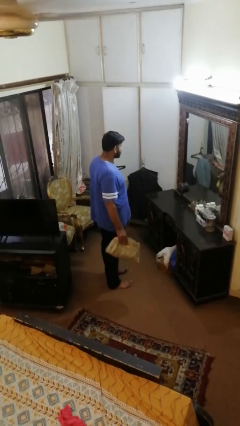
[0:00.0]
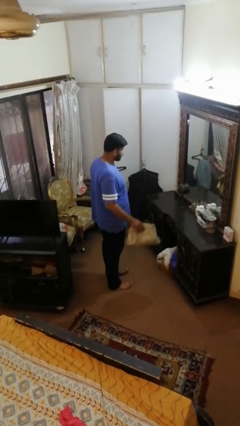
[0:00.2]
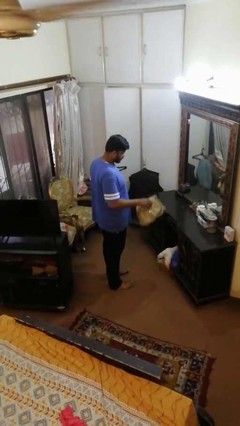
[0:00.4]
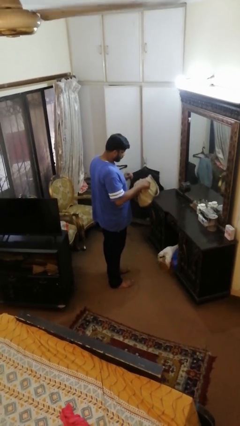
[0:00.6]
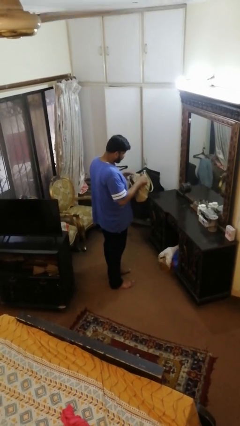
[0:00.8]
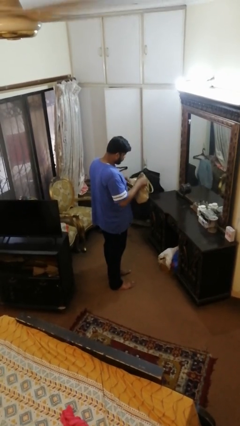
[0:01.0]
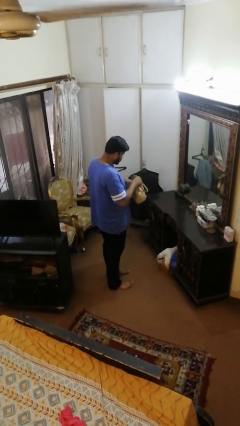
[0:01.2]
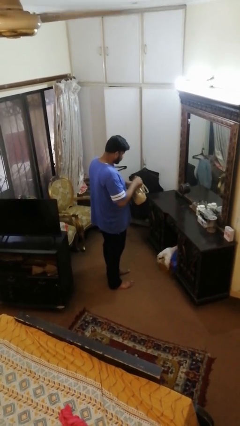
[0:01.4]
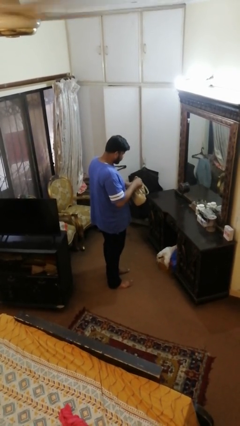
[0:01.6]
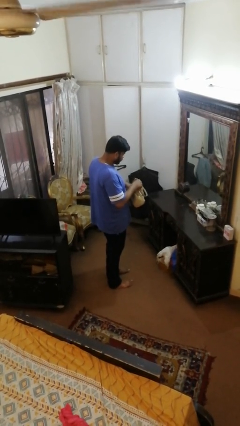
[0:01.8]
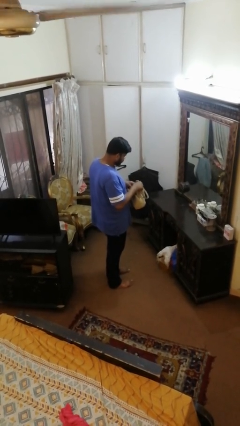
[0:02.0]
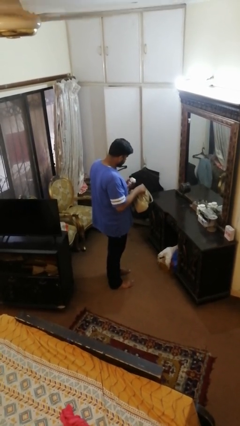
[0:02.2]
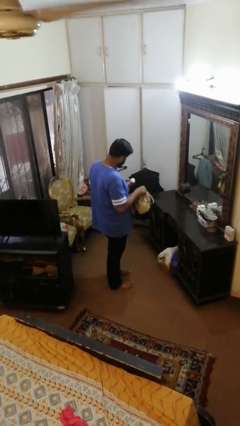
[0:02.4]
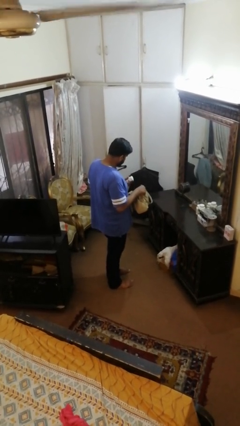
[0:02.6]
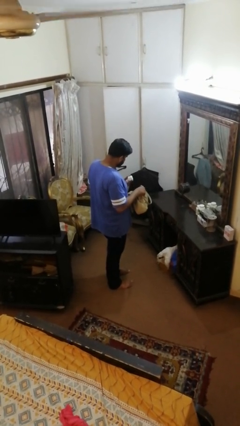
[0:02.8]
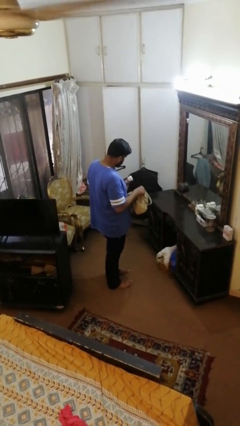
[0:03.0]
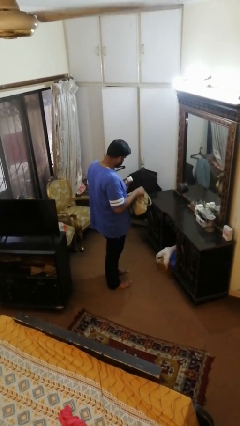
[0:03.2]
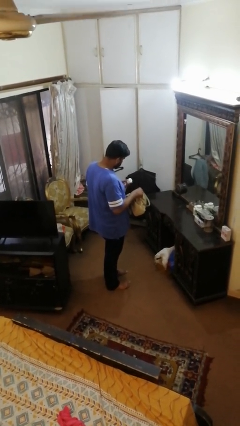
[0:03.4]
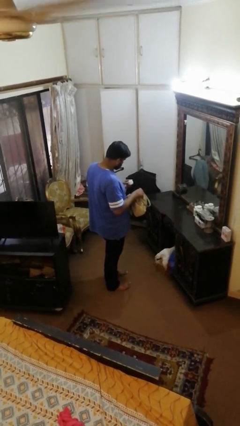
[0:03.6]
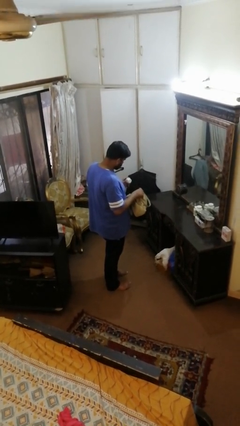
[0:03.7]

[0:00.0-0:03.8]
person searches in purse

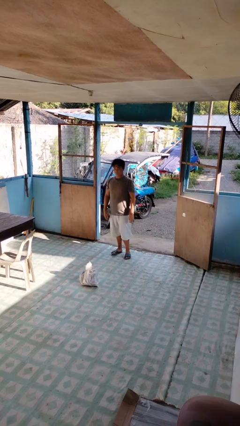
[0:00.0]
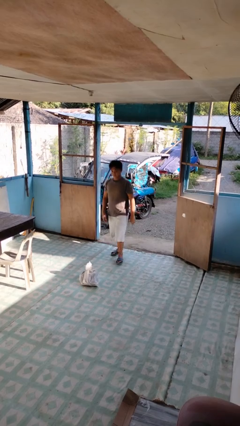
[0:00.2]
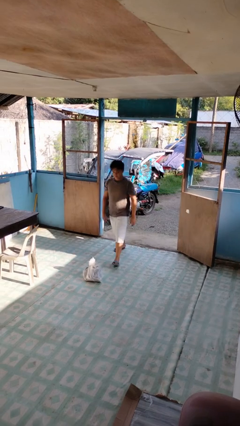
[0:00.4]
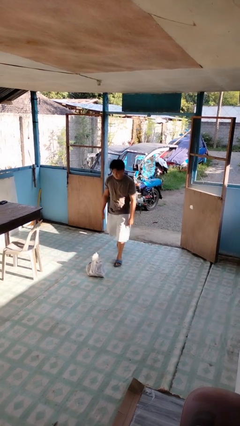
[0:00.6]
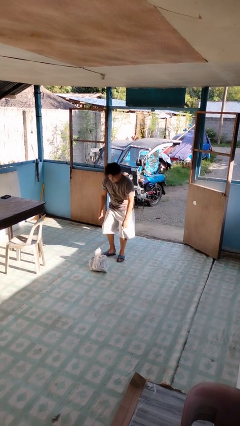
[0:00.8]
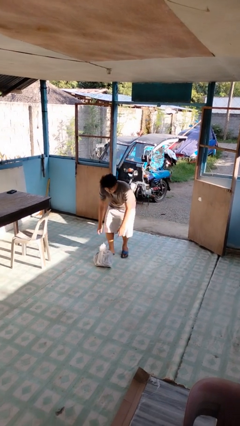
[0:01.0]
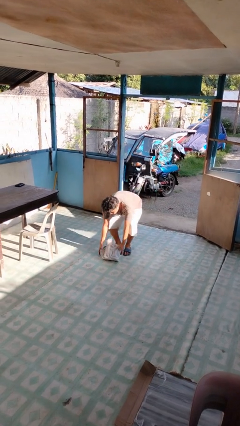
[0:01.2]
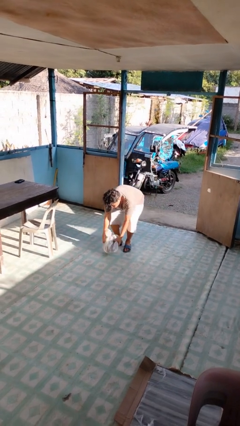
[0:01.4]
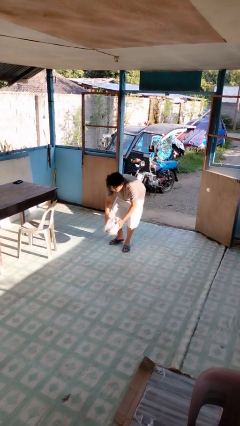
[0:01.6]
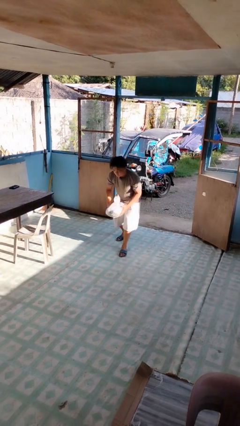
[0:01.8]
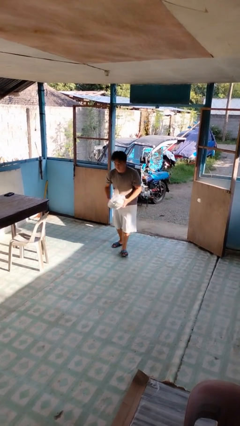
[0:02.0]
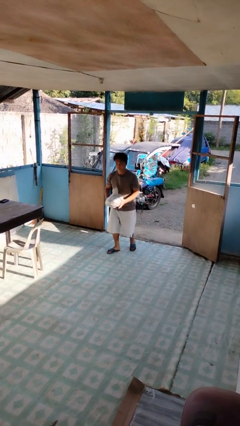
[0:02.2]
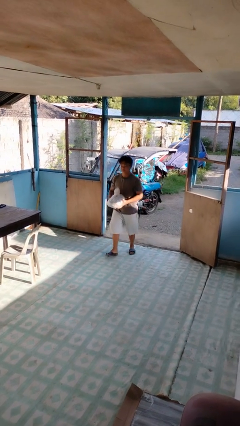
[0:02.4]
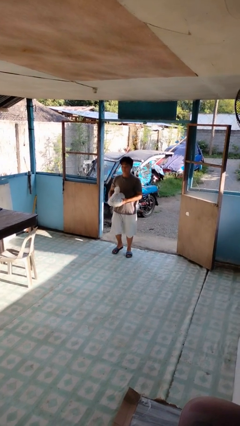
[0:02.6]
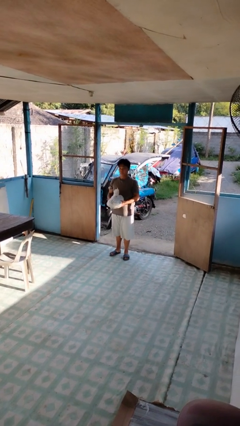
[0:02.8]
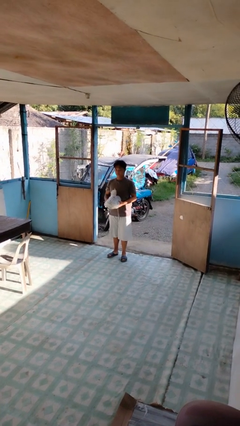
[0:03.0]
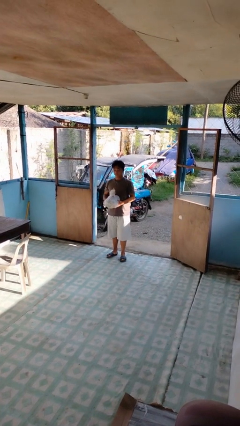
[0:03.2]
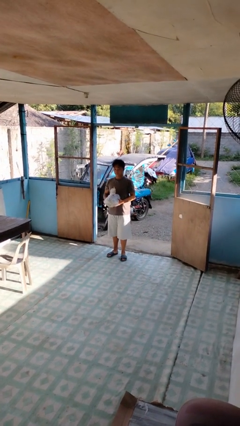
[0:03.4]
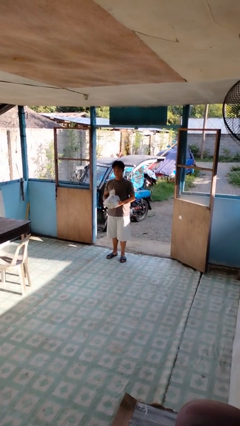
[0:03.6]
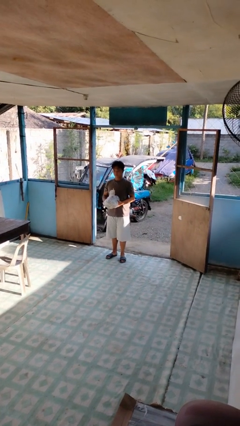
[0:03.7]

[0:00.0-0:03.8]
person picks up object from floor

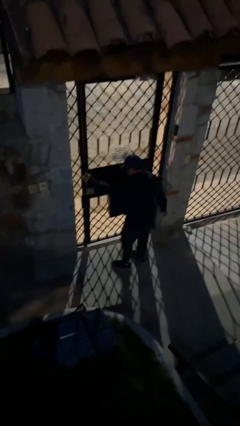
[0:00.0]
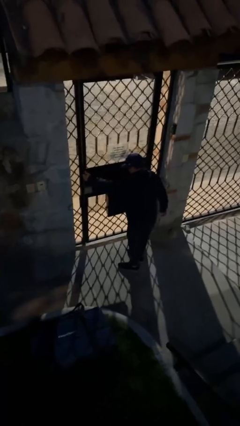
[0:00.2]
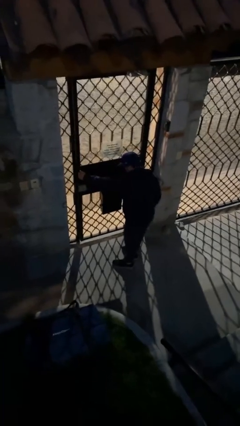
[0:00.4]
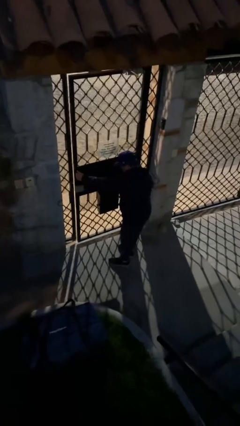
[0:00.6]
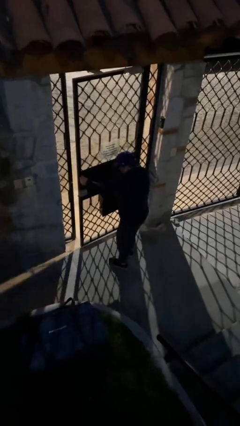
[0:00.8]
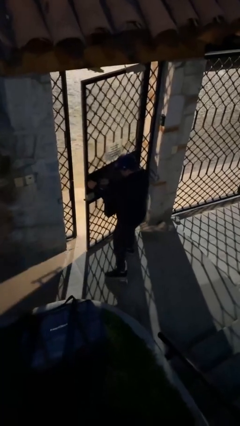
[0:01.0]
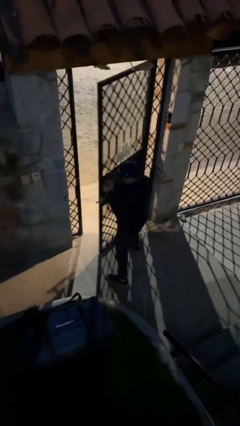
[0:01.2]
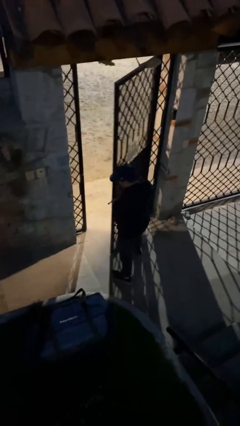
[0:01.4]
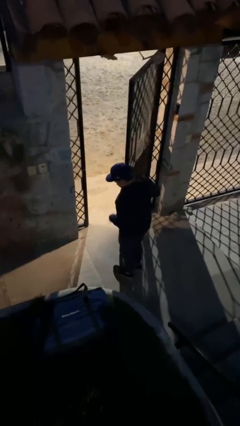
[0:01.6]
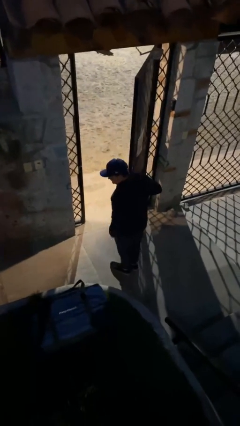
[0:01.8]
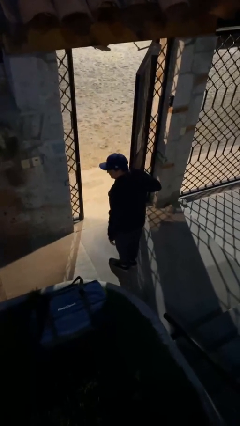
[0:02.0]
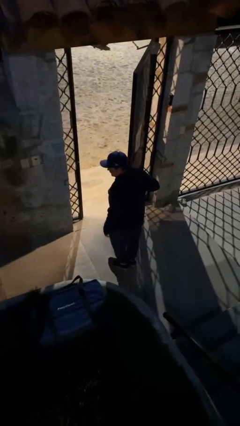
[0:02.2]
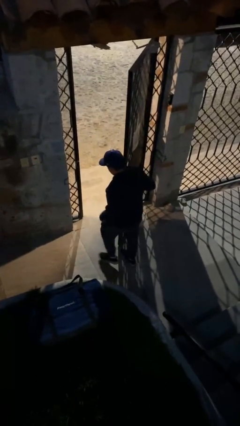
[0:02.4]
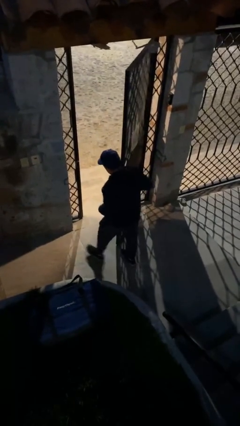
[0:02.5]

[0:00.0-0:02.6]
person opens facility door

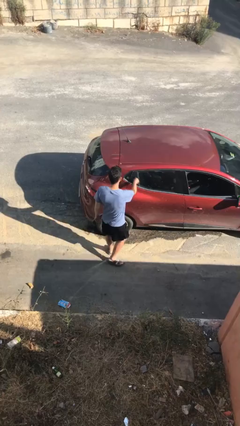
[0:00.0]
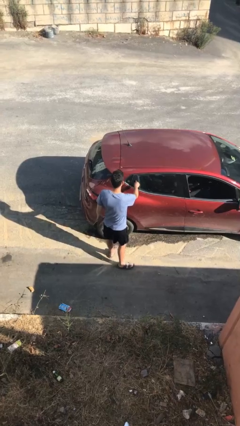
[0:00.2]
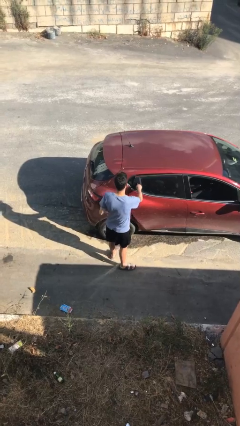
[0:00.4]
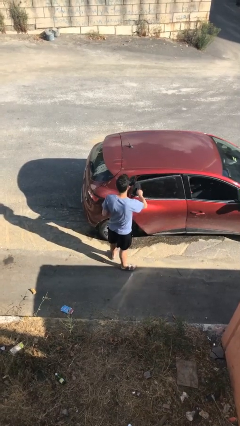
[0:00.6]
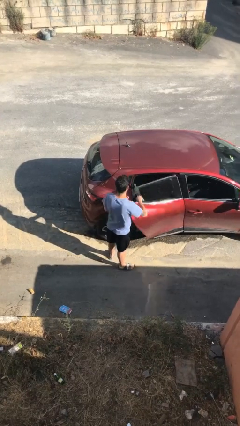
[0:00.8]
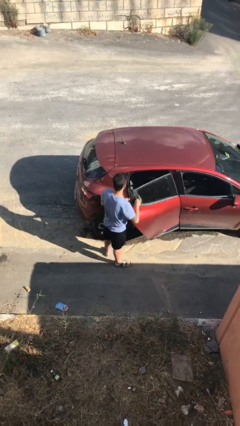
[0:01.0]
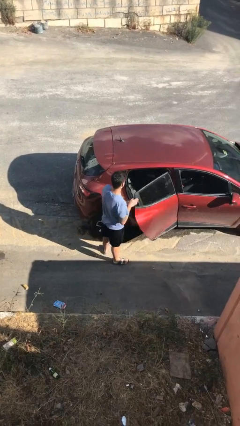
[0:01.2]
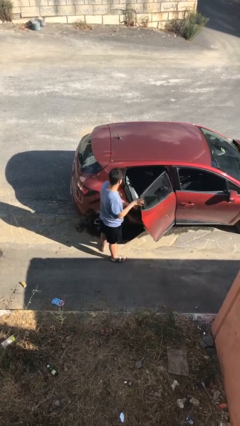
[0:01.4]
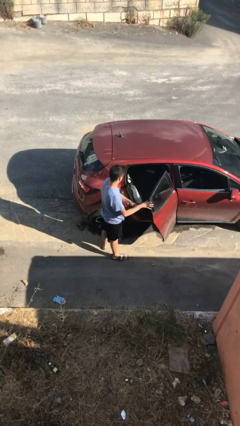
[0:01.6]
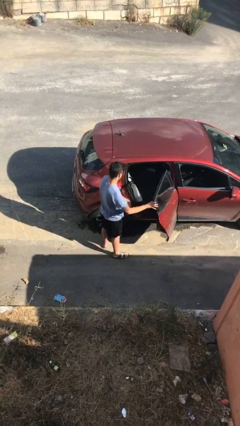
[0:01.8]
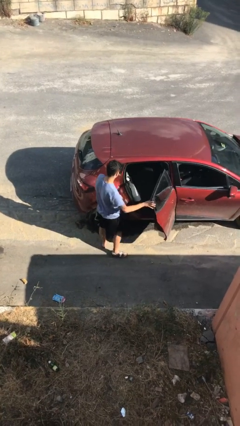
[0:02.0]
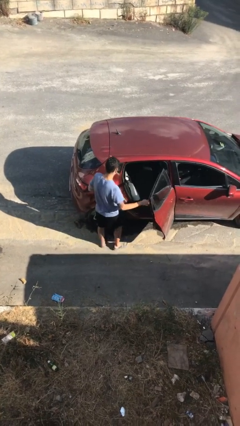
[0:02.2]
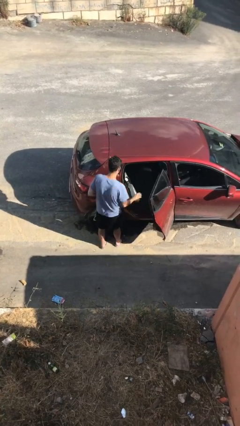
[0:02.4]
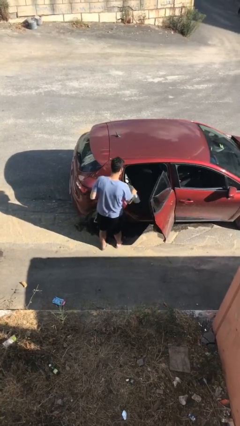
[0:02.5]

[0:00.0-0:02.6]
person opens car door

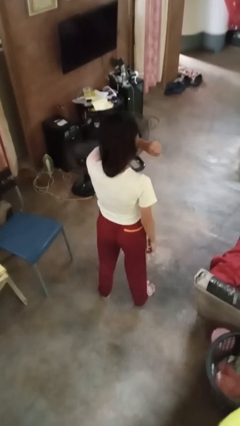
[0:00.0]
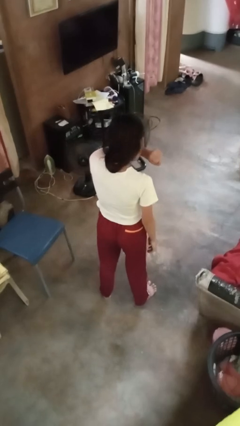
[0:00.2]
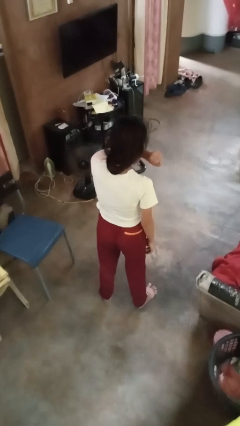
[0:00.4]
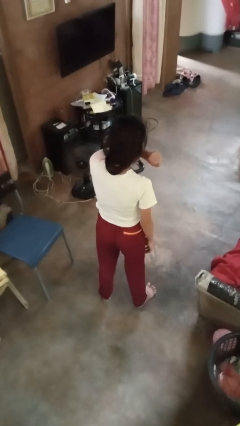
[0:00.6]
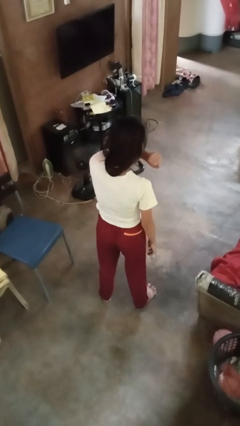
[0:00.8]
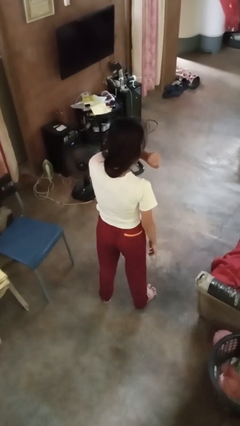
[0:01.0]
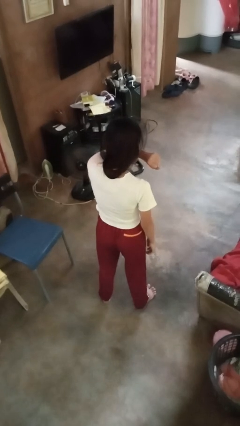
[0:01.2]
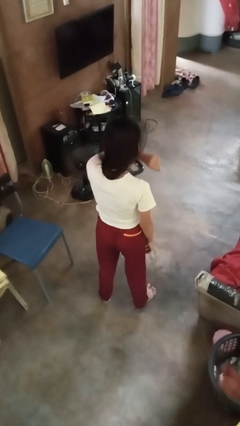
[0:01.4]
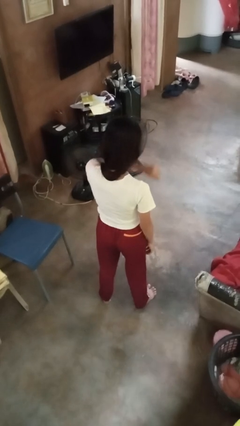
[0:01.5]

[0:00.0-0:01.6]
person sneezes into arm

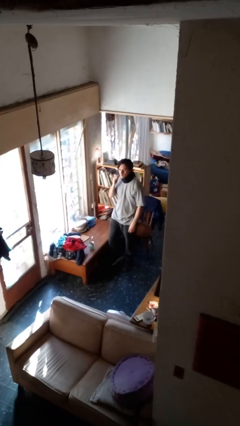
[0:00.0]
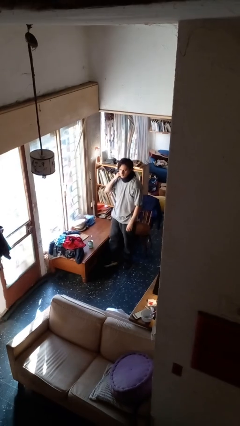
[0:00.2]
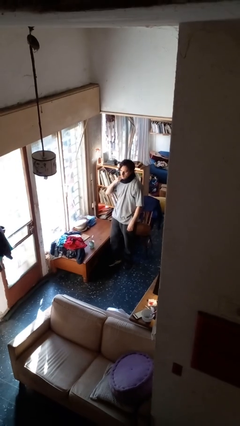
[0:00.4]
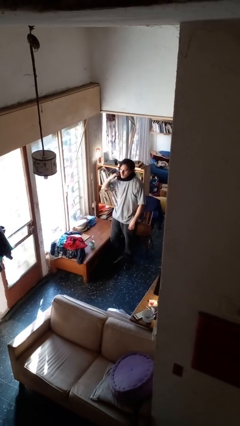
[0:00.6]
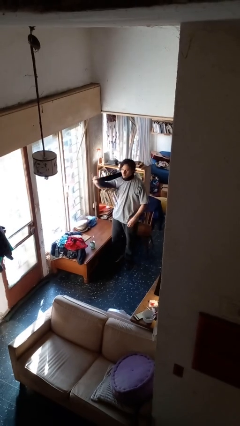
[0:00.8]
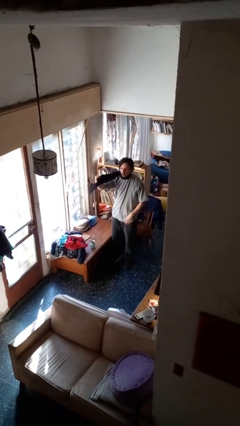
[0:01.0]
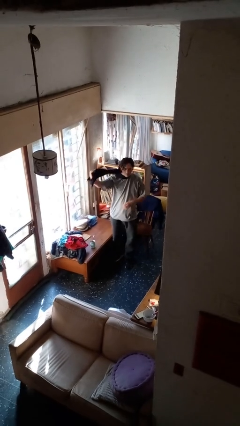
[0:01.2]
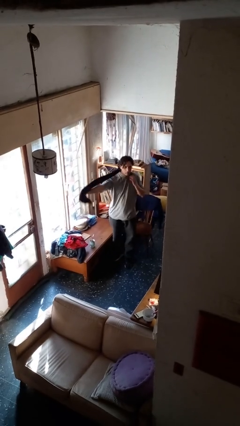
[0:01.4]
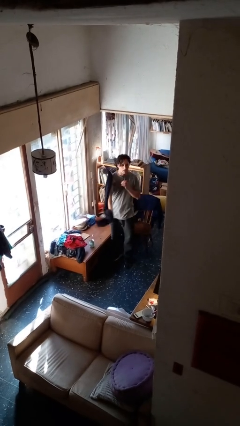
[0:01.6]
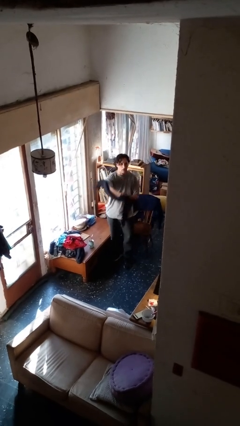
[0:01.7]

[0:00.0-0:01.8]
person takes off scarf

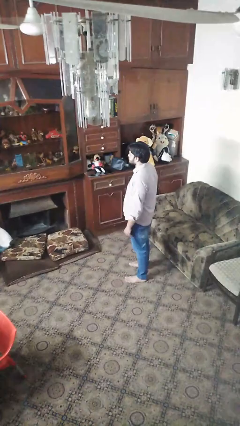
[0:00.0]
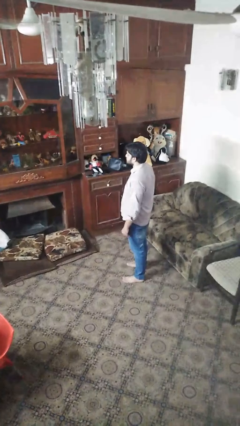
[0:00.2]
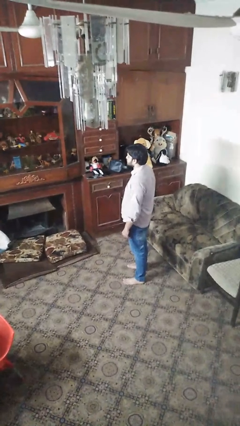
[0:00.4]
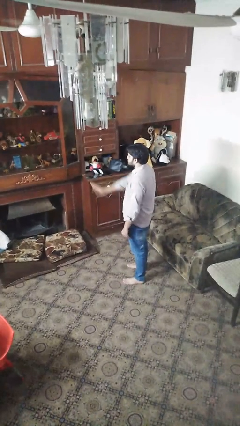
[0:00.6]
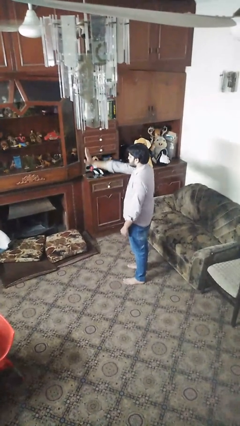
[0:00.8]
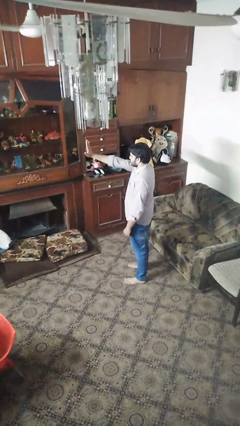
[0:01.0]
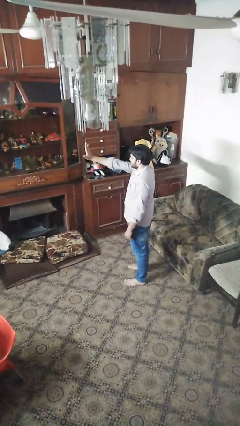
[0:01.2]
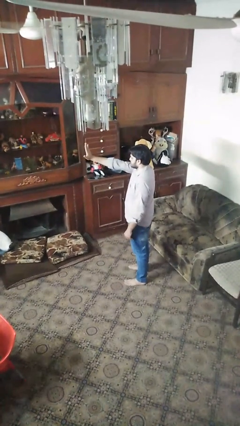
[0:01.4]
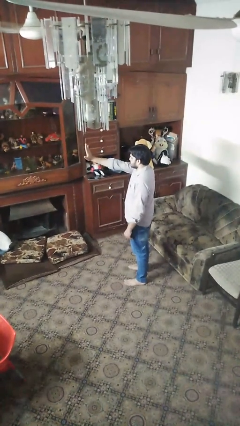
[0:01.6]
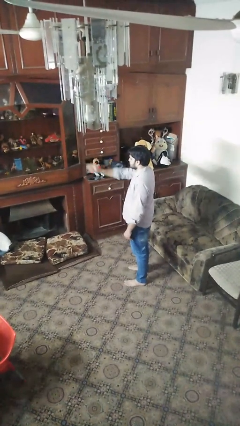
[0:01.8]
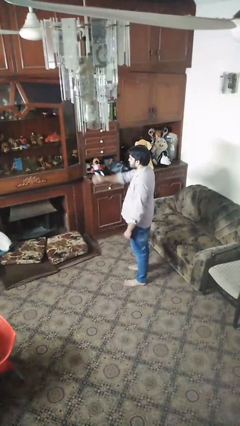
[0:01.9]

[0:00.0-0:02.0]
person gestures stop
